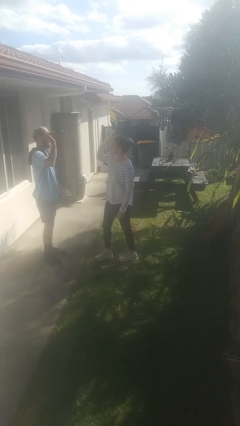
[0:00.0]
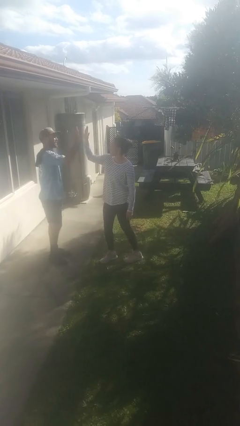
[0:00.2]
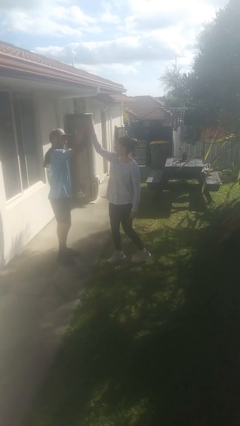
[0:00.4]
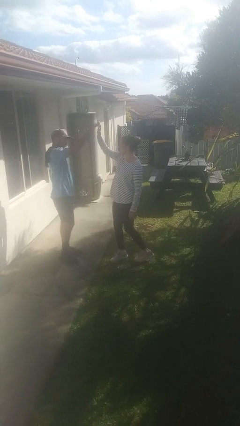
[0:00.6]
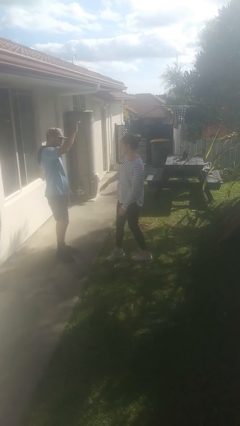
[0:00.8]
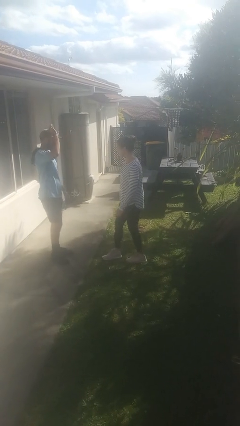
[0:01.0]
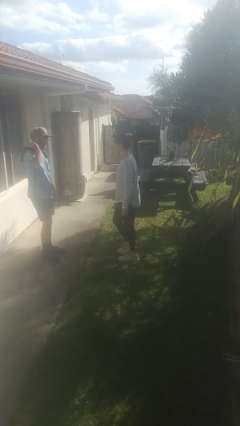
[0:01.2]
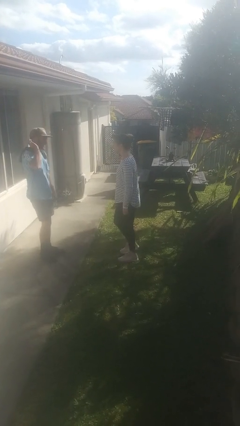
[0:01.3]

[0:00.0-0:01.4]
person highfives hand

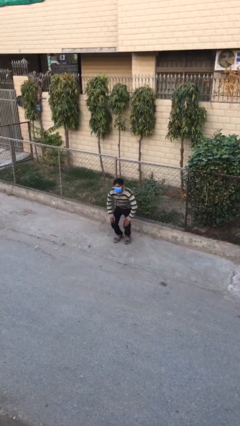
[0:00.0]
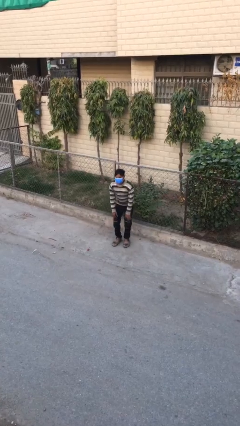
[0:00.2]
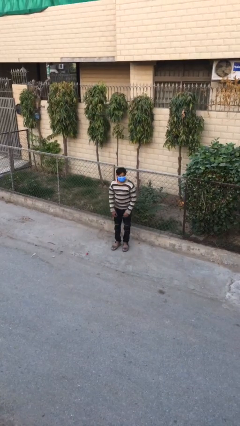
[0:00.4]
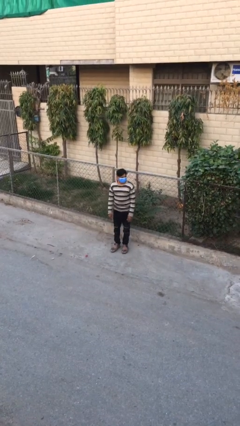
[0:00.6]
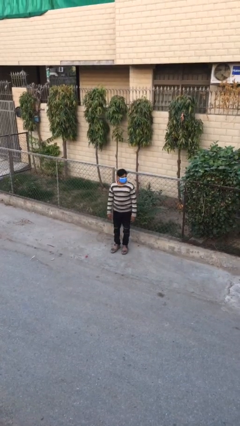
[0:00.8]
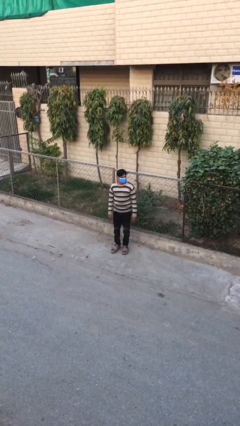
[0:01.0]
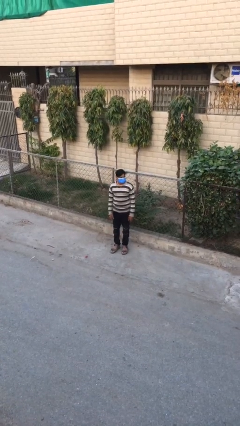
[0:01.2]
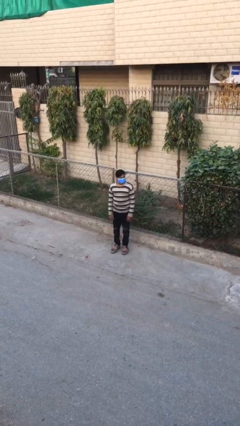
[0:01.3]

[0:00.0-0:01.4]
person stands up

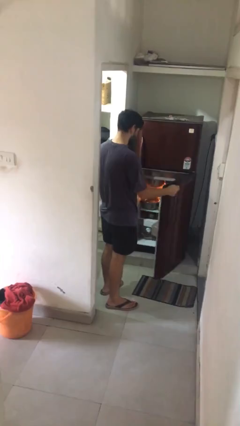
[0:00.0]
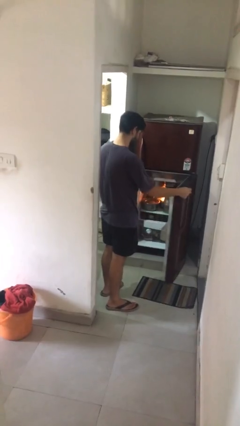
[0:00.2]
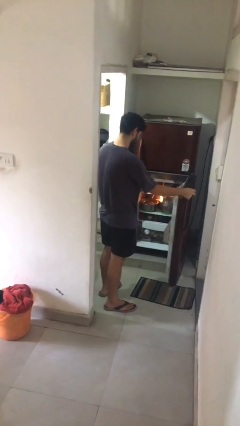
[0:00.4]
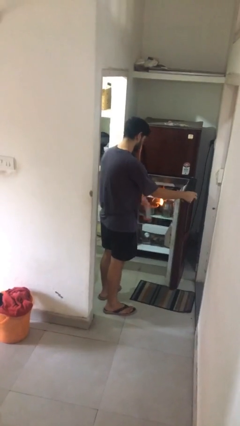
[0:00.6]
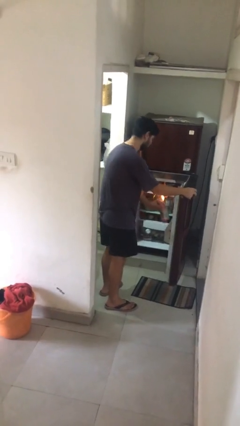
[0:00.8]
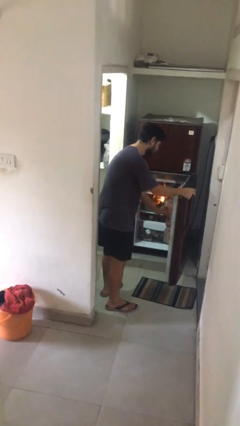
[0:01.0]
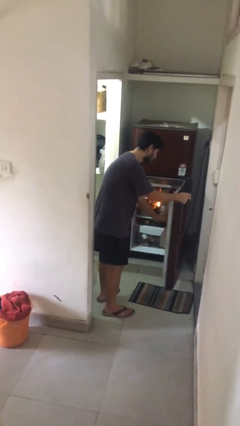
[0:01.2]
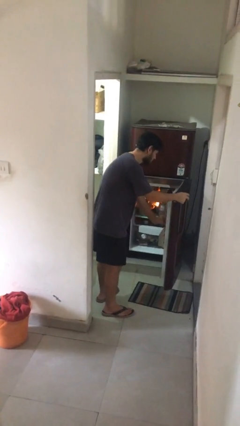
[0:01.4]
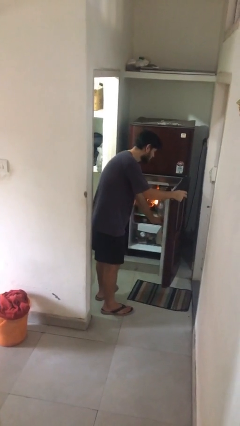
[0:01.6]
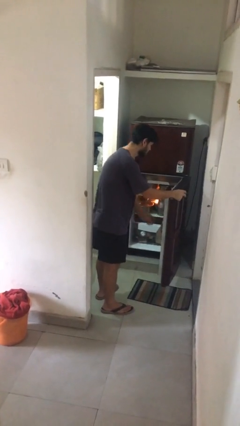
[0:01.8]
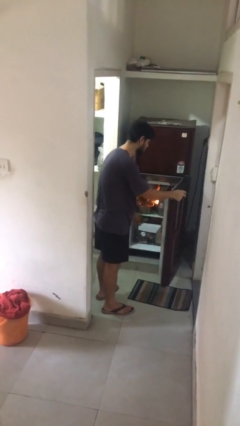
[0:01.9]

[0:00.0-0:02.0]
person puts object into refrigerator

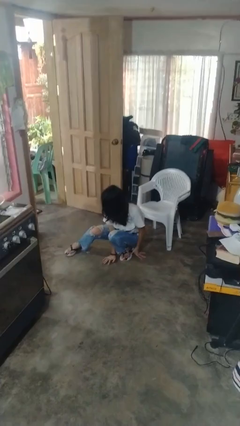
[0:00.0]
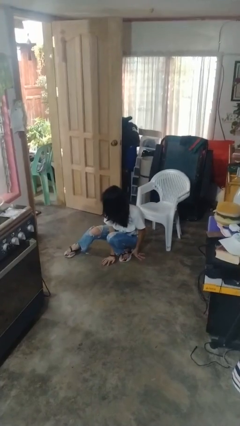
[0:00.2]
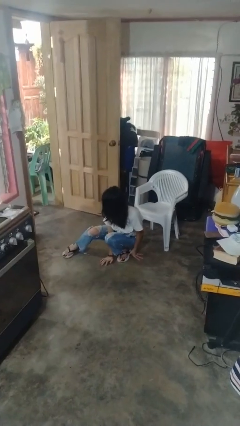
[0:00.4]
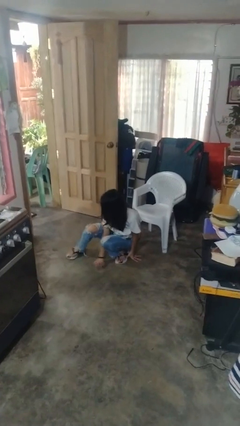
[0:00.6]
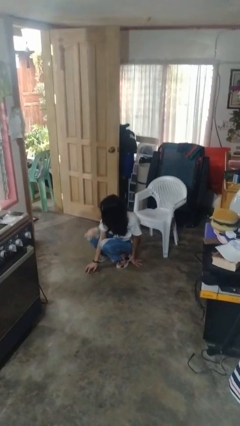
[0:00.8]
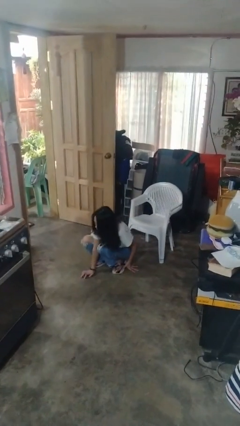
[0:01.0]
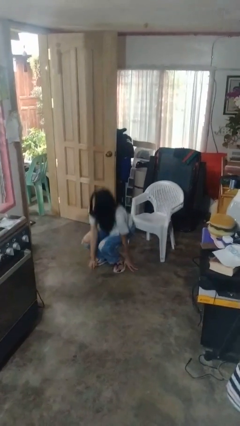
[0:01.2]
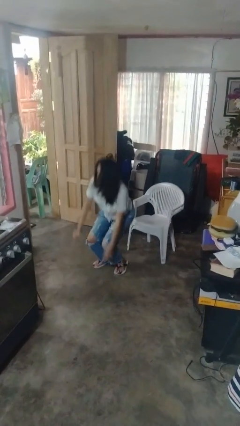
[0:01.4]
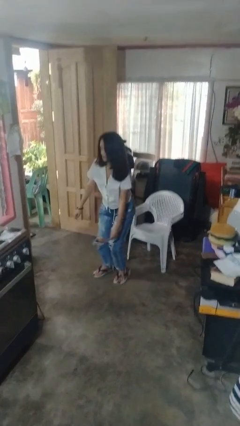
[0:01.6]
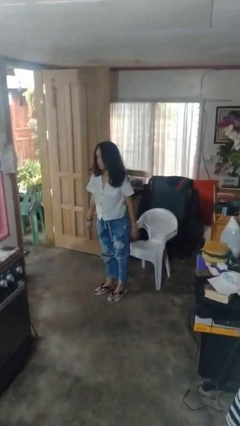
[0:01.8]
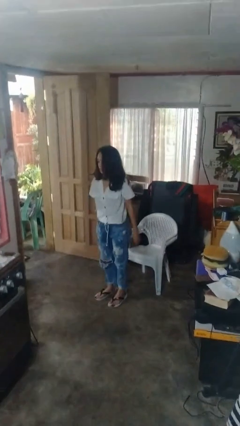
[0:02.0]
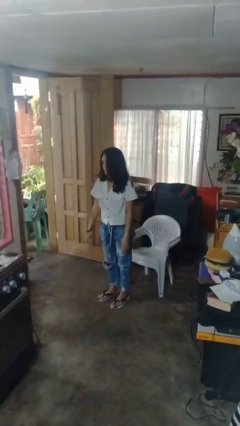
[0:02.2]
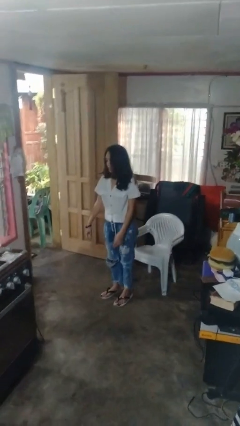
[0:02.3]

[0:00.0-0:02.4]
person stands up from floor

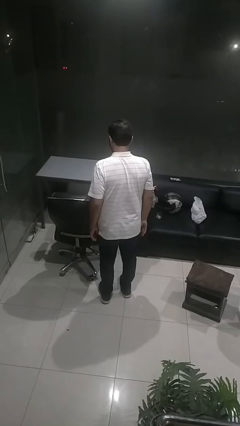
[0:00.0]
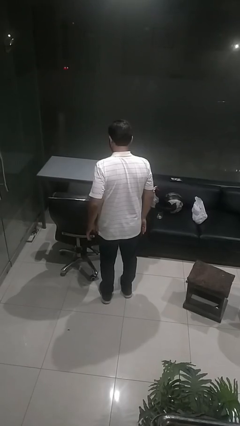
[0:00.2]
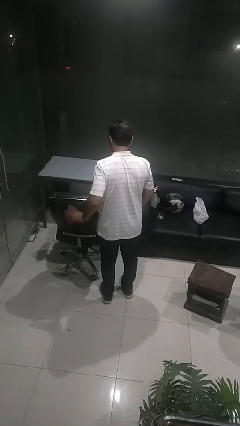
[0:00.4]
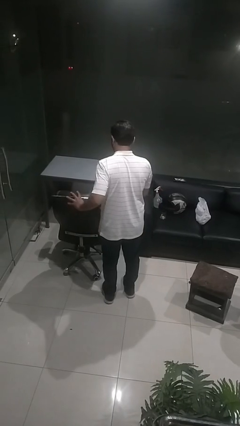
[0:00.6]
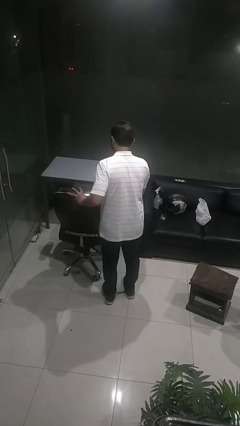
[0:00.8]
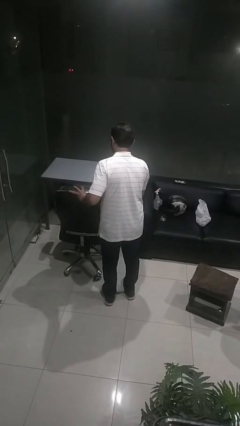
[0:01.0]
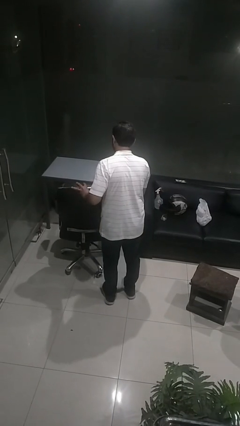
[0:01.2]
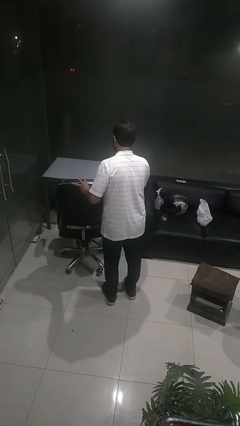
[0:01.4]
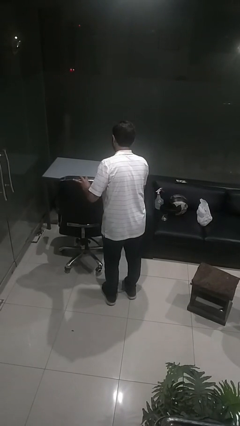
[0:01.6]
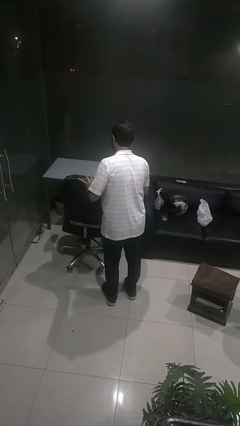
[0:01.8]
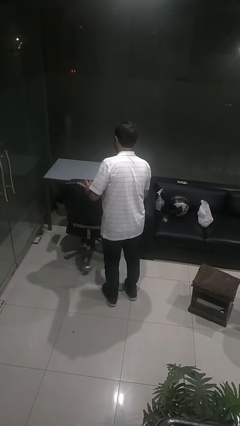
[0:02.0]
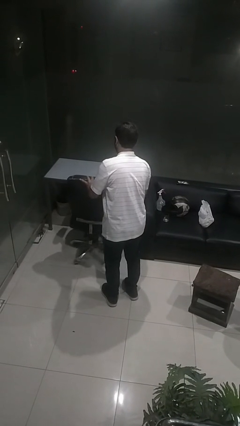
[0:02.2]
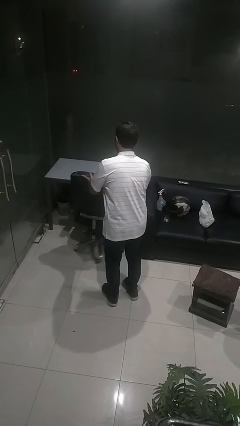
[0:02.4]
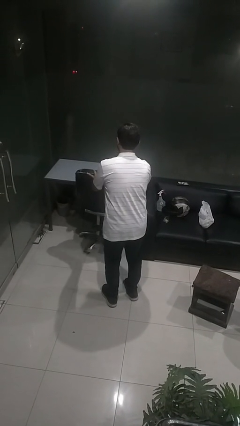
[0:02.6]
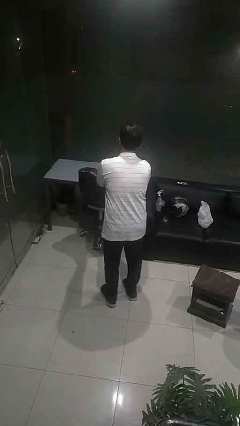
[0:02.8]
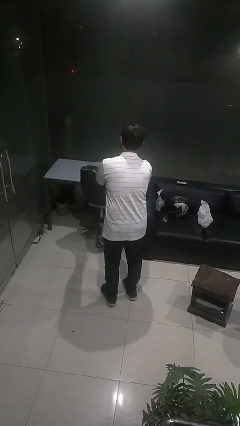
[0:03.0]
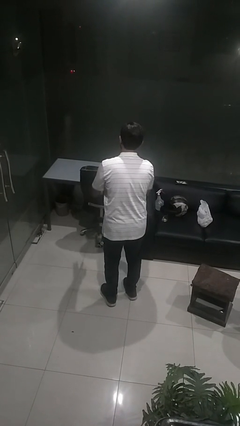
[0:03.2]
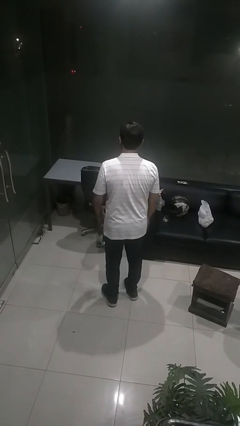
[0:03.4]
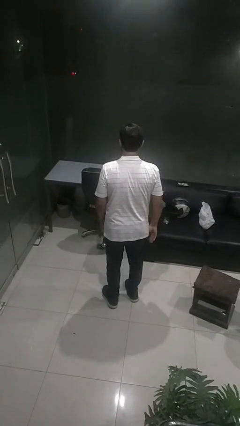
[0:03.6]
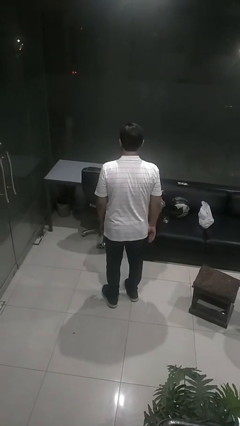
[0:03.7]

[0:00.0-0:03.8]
person pushes in chair

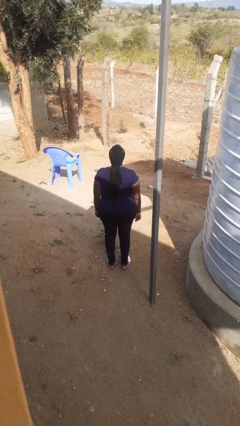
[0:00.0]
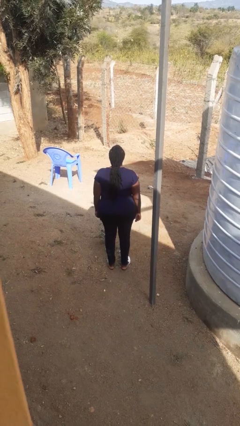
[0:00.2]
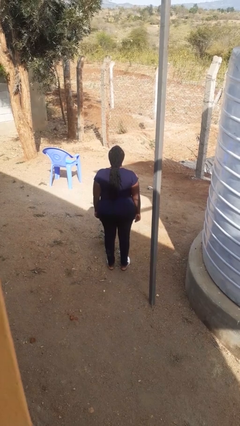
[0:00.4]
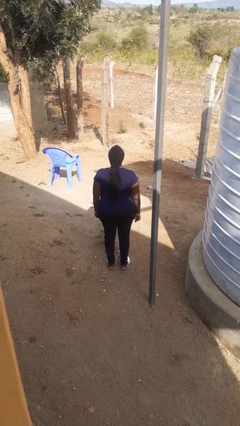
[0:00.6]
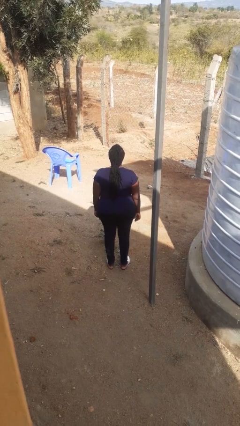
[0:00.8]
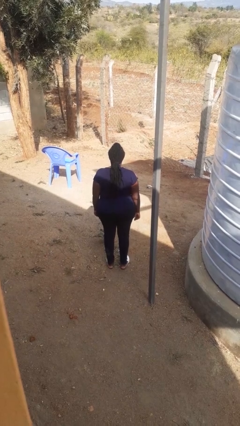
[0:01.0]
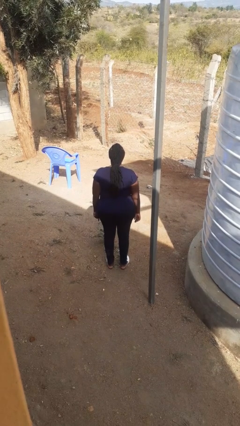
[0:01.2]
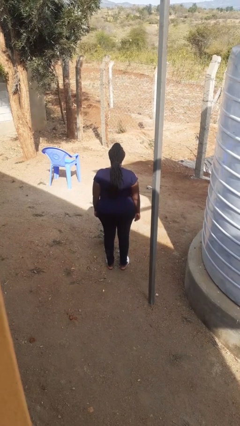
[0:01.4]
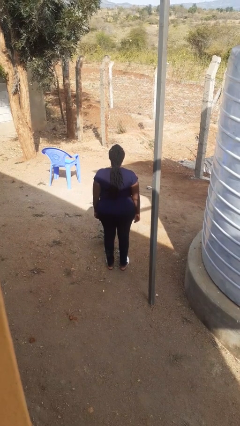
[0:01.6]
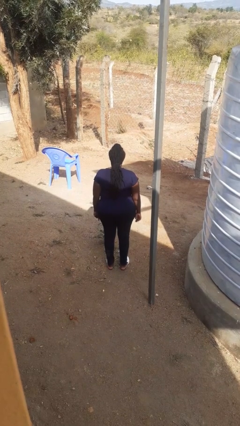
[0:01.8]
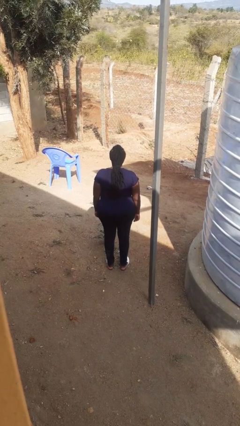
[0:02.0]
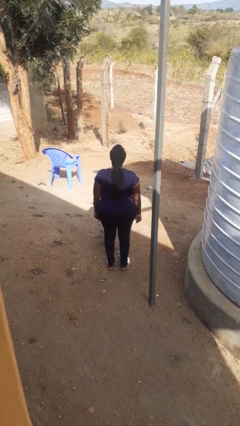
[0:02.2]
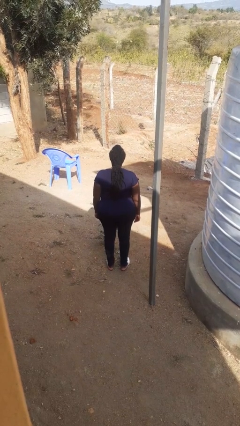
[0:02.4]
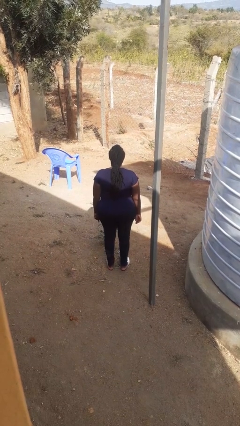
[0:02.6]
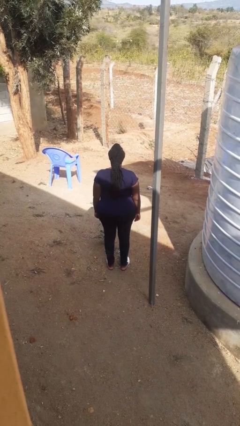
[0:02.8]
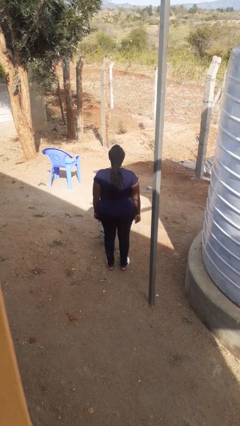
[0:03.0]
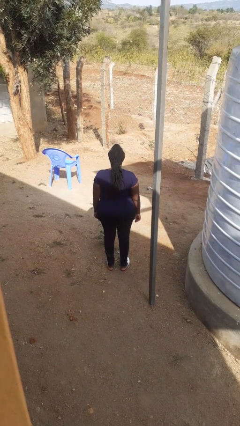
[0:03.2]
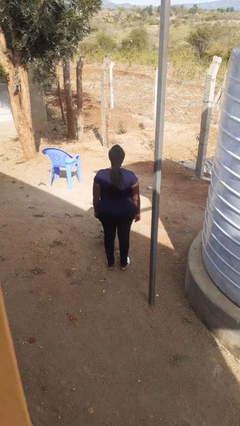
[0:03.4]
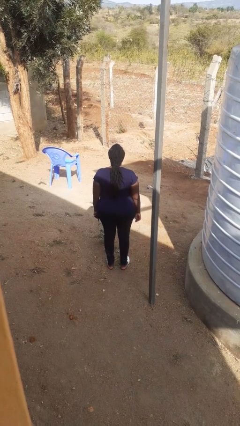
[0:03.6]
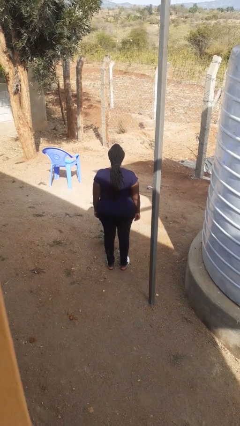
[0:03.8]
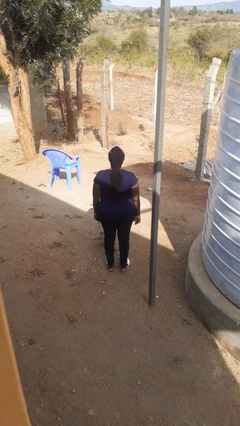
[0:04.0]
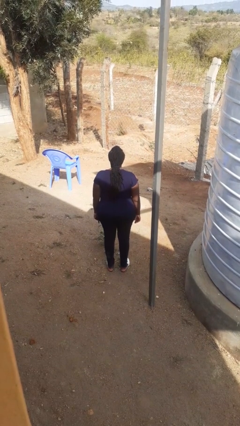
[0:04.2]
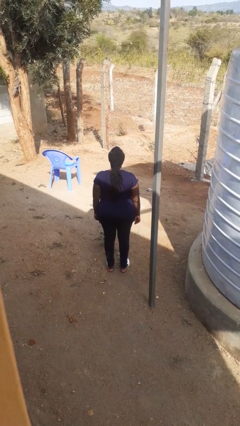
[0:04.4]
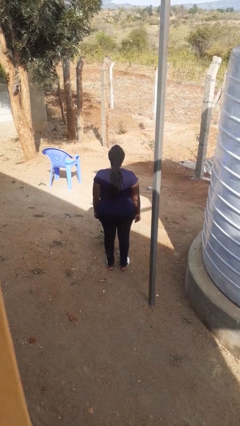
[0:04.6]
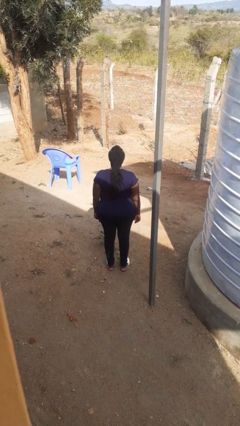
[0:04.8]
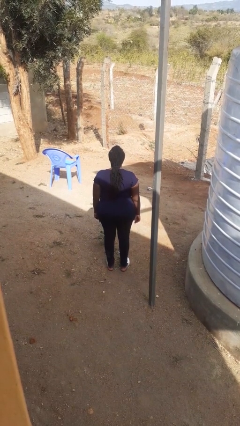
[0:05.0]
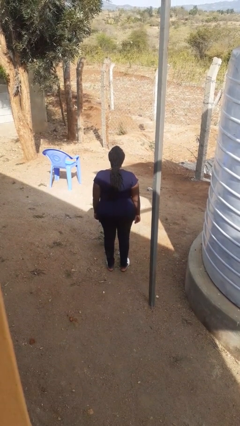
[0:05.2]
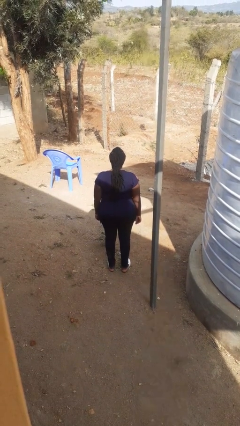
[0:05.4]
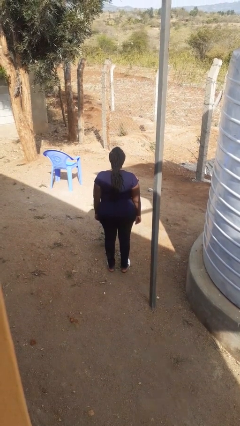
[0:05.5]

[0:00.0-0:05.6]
person nods head

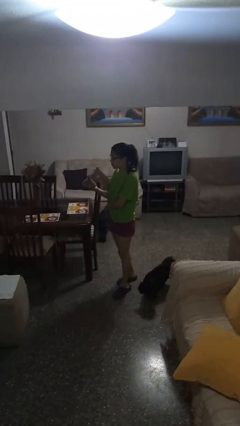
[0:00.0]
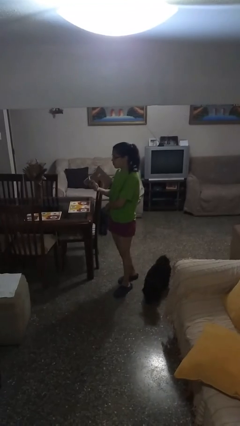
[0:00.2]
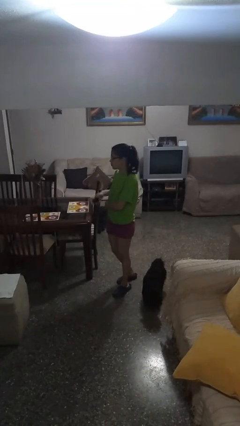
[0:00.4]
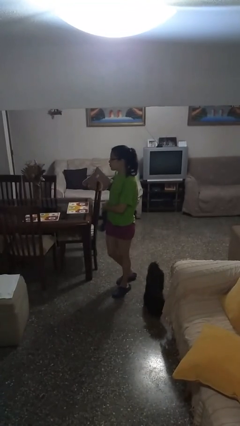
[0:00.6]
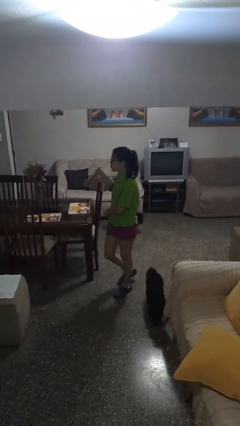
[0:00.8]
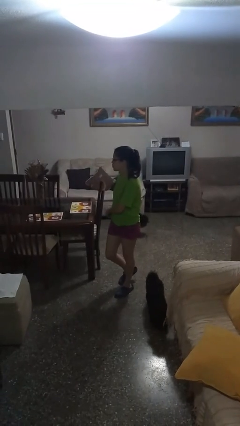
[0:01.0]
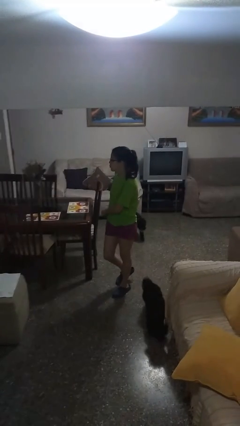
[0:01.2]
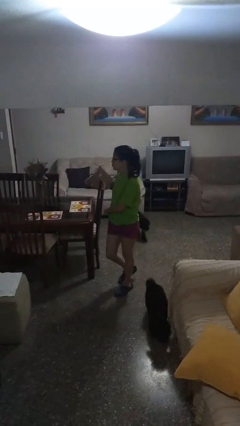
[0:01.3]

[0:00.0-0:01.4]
person puts phone into pocket
